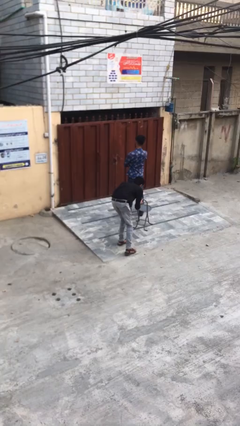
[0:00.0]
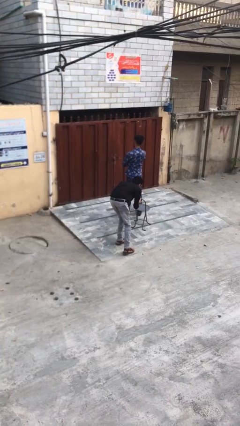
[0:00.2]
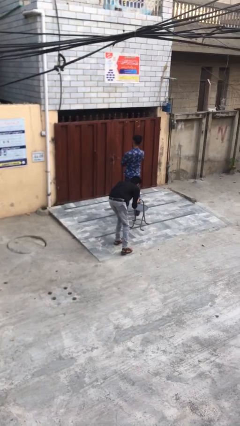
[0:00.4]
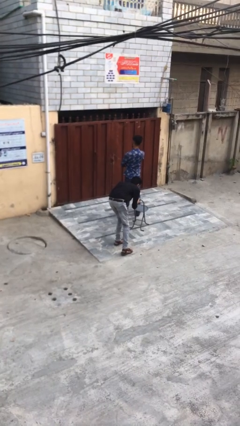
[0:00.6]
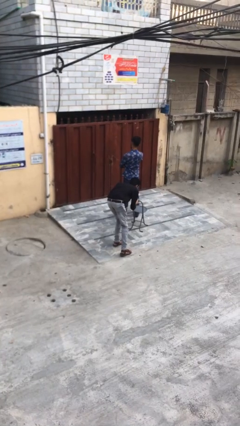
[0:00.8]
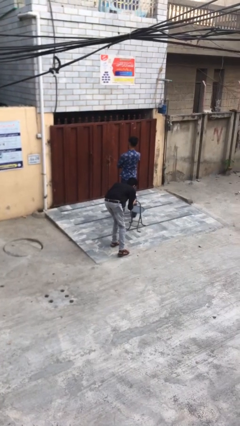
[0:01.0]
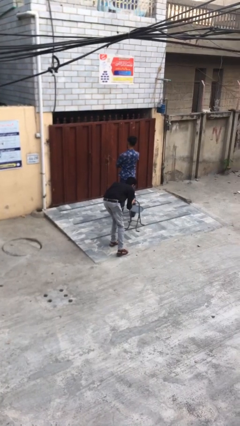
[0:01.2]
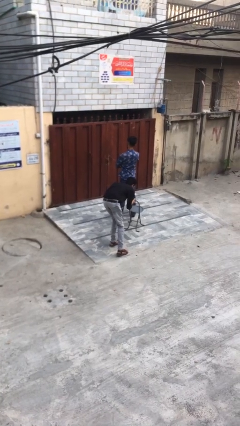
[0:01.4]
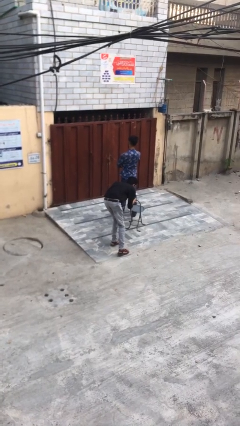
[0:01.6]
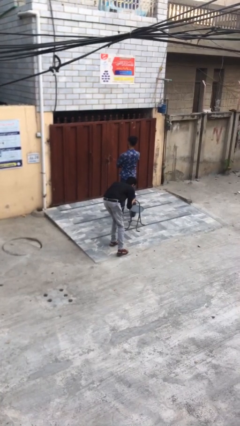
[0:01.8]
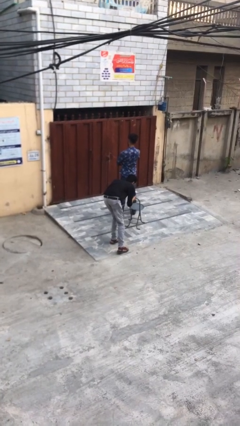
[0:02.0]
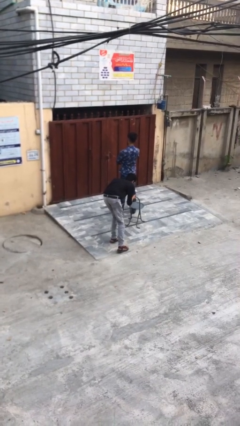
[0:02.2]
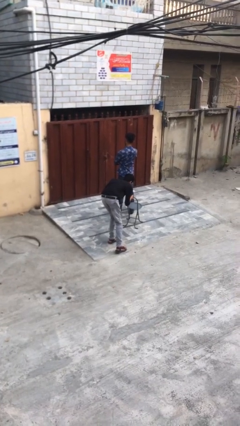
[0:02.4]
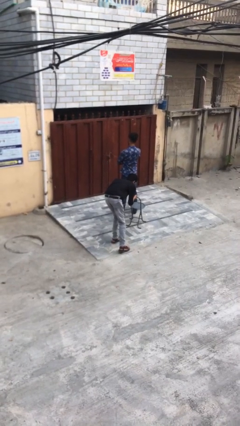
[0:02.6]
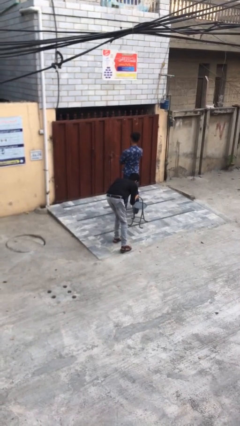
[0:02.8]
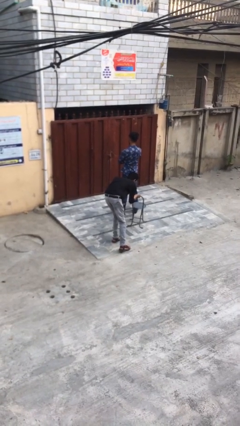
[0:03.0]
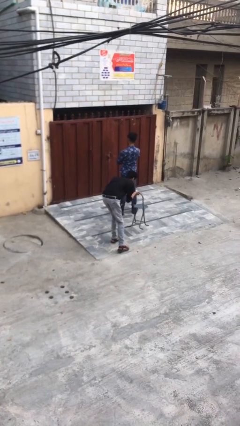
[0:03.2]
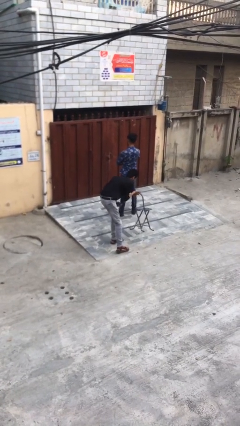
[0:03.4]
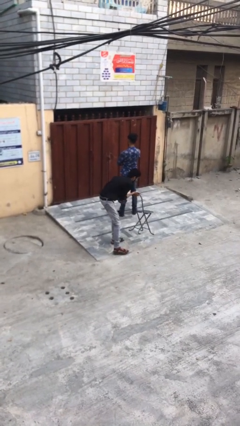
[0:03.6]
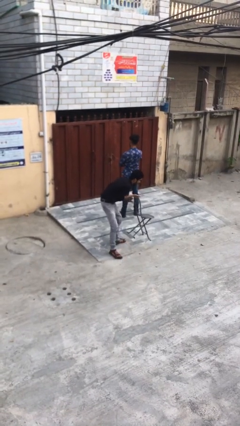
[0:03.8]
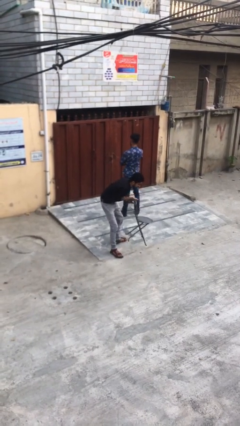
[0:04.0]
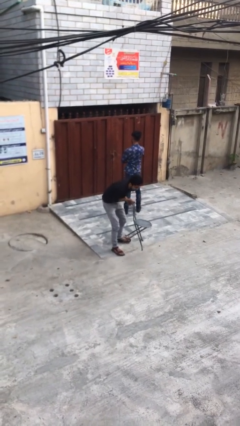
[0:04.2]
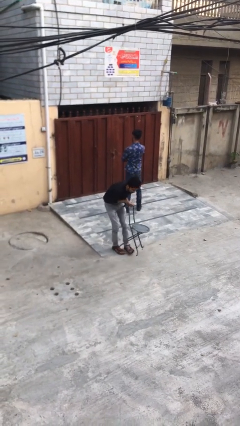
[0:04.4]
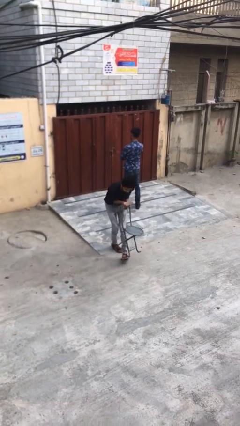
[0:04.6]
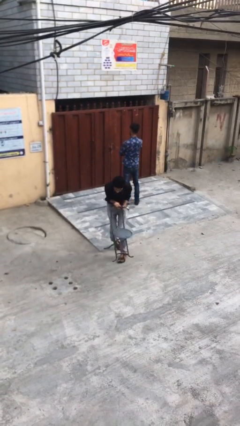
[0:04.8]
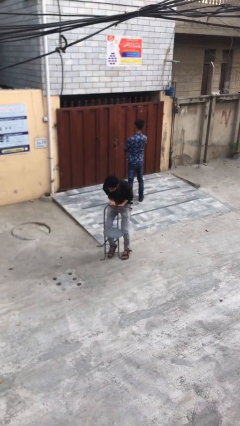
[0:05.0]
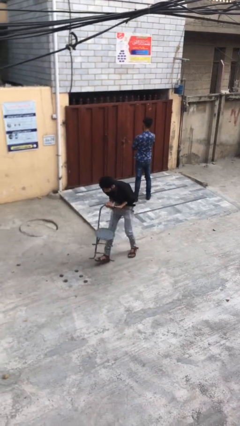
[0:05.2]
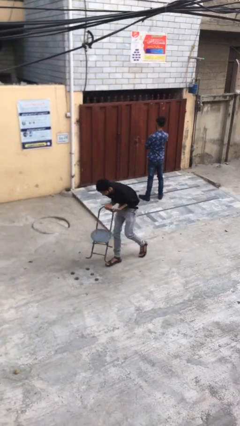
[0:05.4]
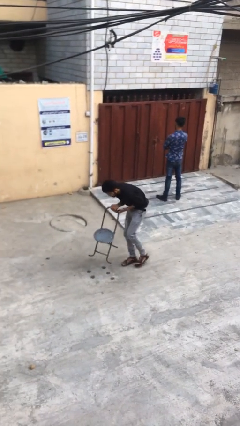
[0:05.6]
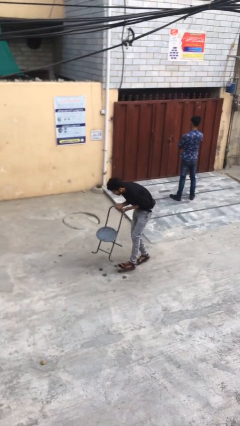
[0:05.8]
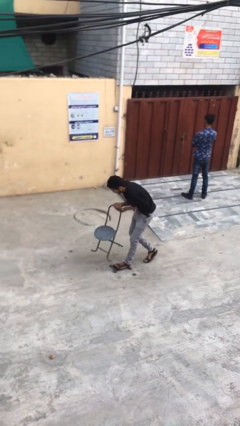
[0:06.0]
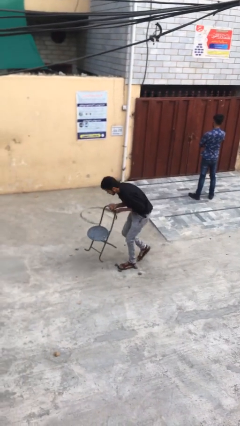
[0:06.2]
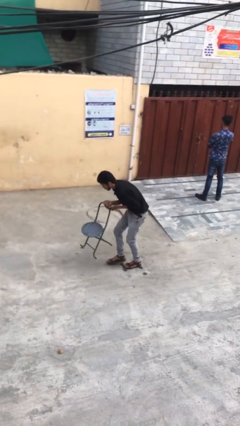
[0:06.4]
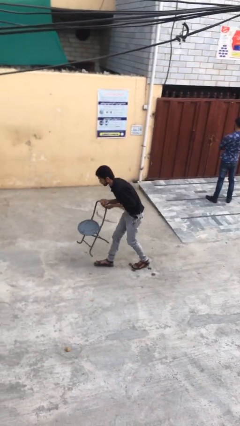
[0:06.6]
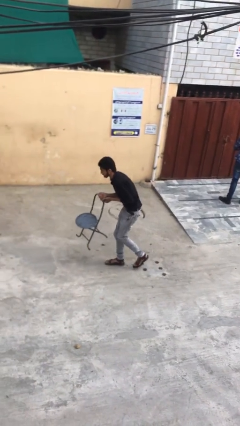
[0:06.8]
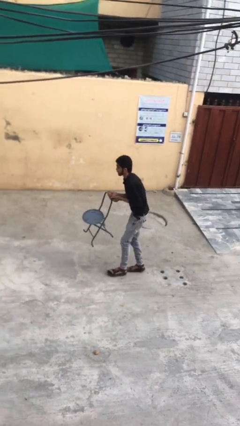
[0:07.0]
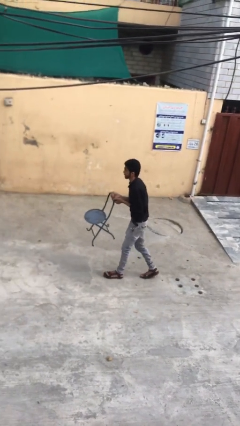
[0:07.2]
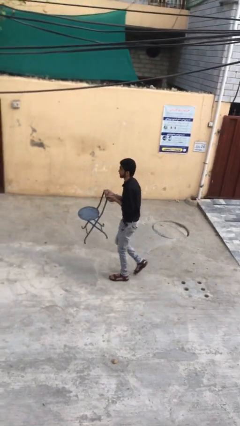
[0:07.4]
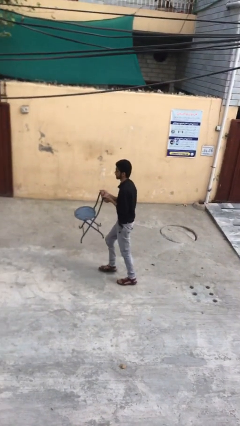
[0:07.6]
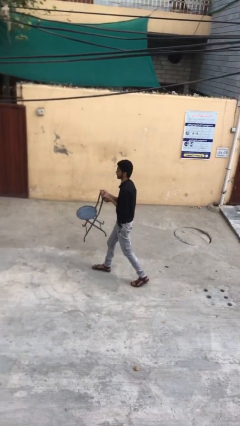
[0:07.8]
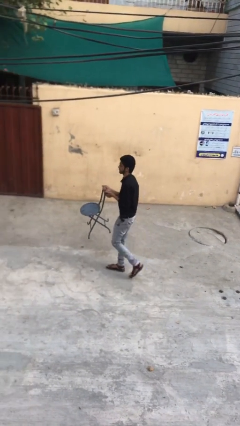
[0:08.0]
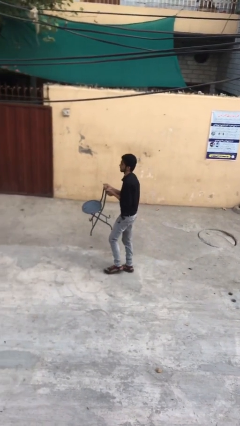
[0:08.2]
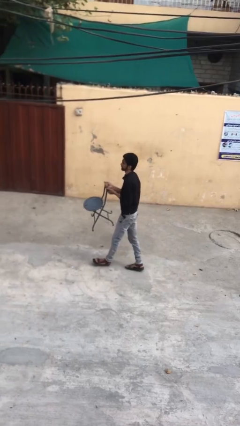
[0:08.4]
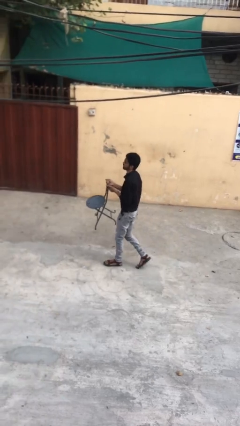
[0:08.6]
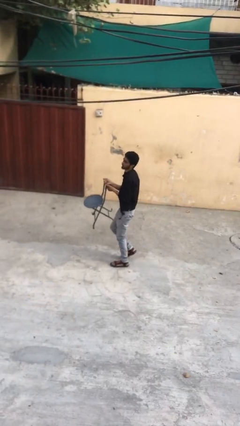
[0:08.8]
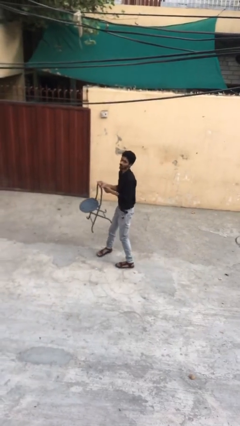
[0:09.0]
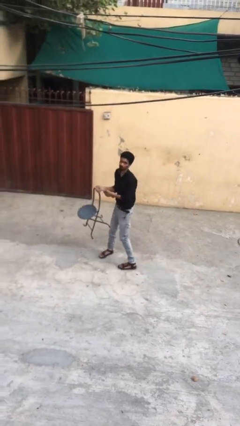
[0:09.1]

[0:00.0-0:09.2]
person steals object from person

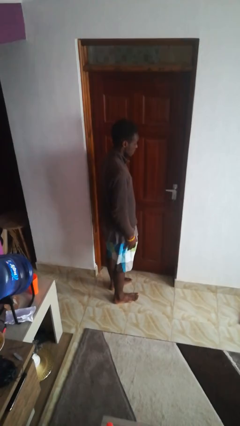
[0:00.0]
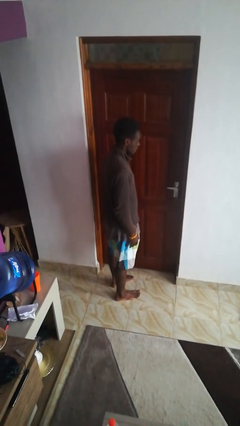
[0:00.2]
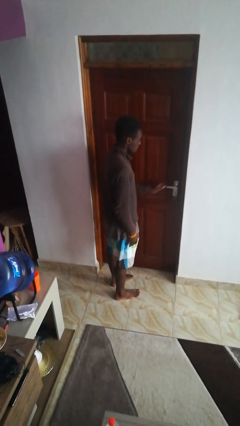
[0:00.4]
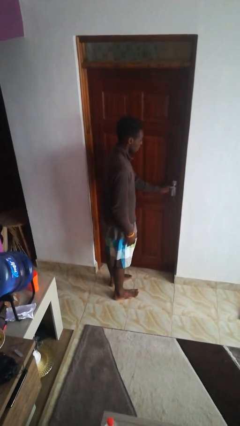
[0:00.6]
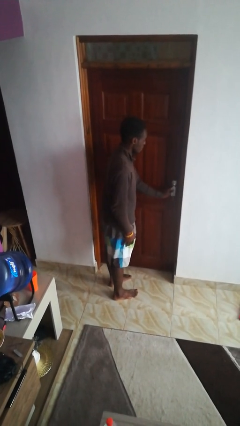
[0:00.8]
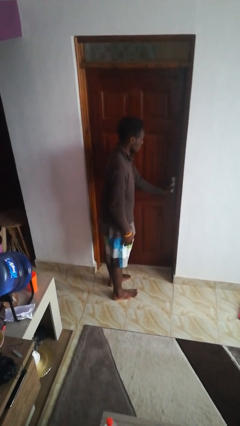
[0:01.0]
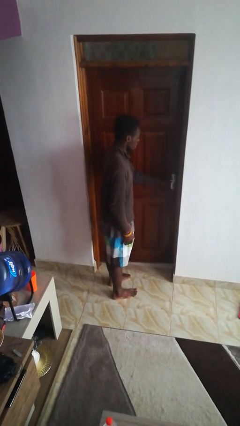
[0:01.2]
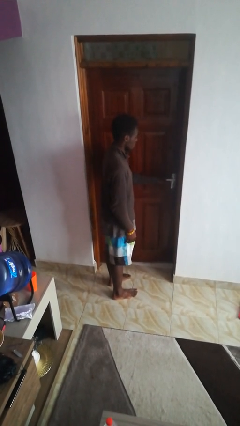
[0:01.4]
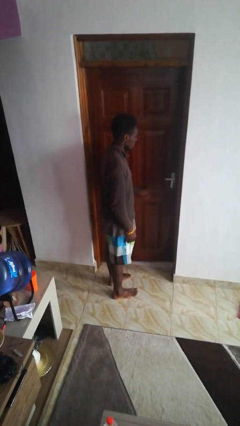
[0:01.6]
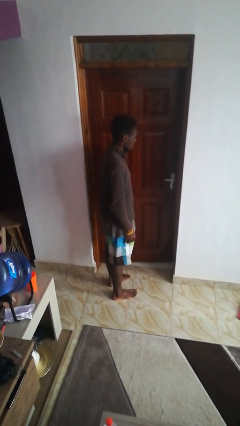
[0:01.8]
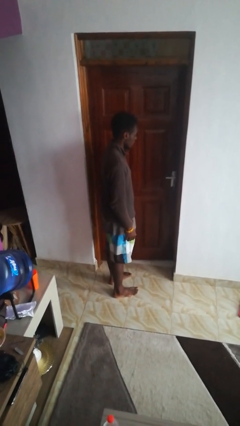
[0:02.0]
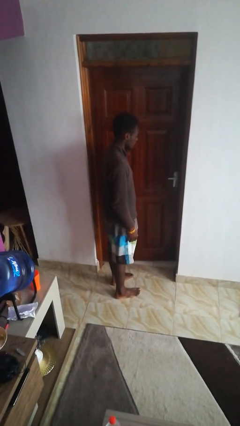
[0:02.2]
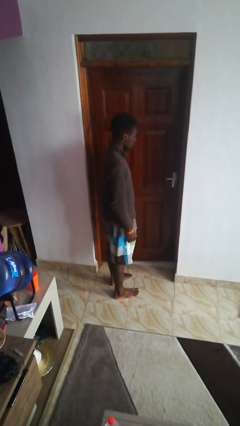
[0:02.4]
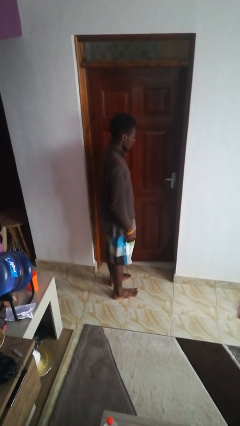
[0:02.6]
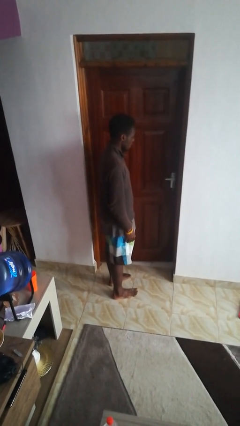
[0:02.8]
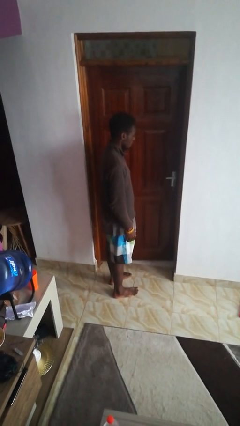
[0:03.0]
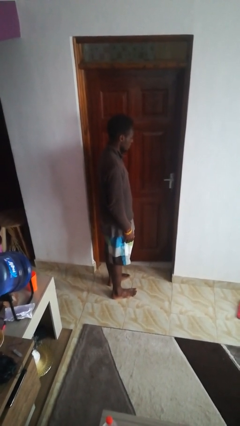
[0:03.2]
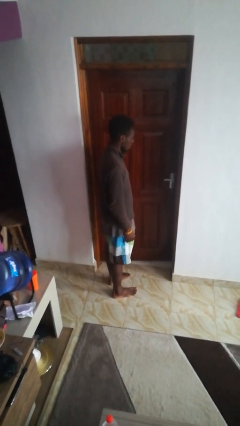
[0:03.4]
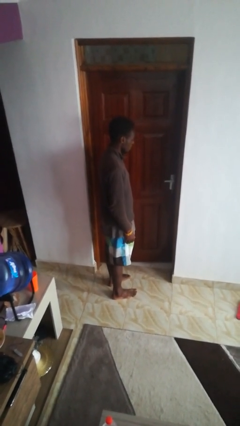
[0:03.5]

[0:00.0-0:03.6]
person opens facility door

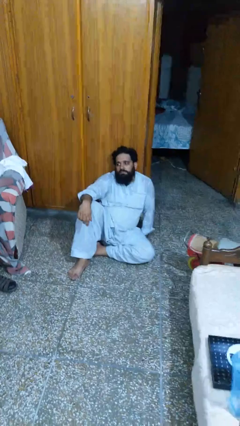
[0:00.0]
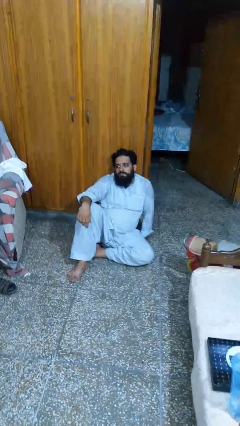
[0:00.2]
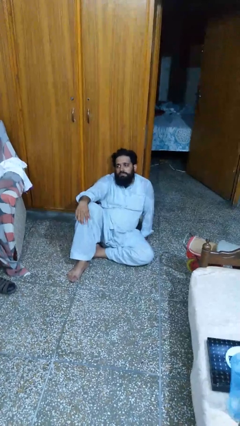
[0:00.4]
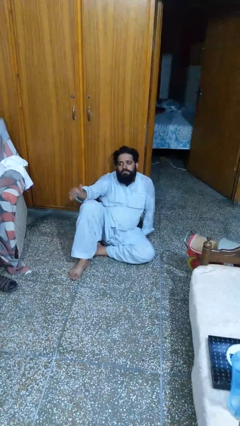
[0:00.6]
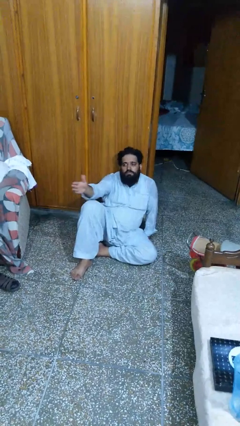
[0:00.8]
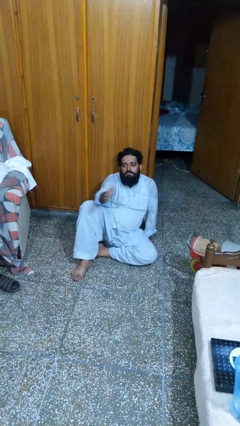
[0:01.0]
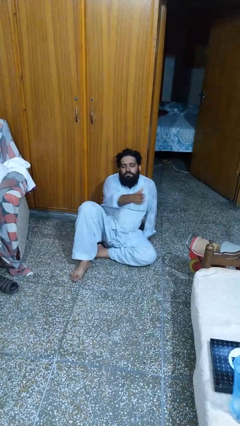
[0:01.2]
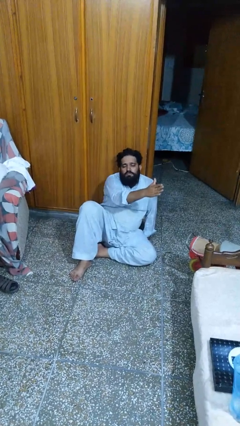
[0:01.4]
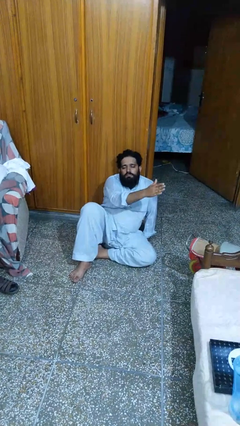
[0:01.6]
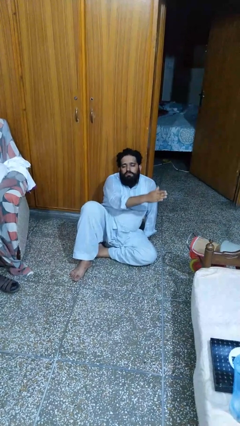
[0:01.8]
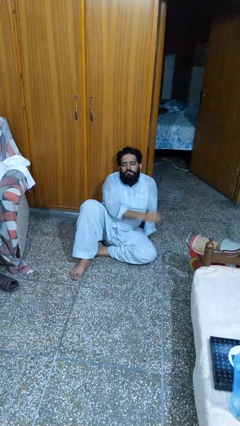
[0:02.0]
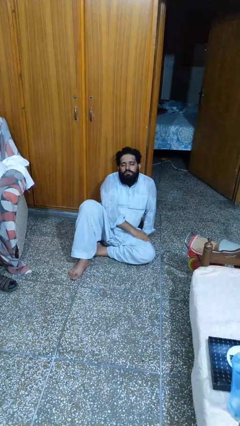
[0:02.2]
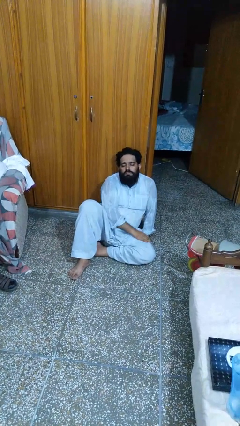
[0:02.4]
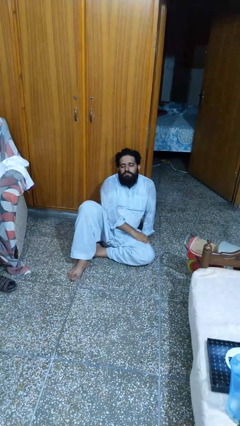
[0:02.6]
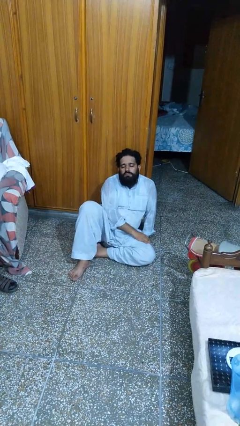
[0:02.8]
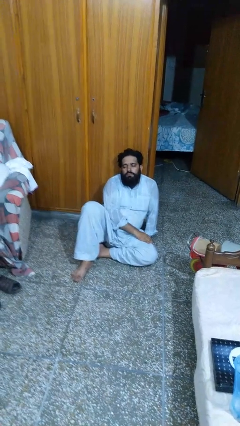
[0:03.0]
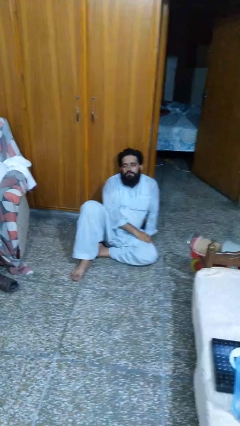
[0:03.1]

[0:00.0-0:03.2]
person gestures swipe left

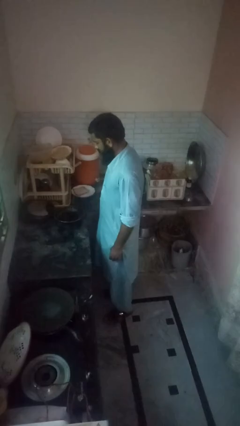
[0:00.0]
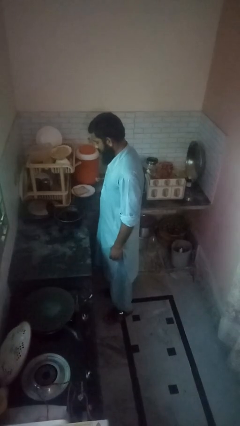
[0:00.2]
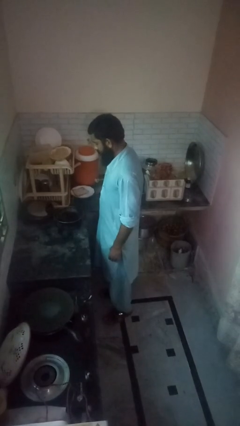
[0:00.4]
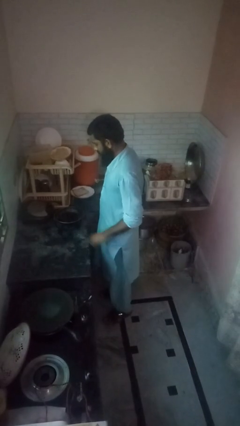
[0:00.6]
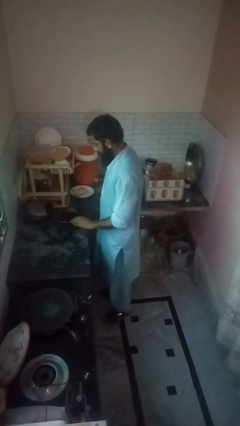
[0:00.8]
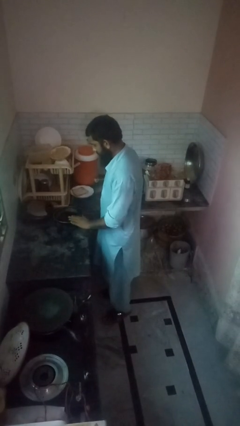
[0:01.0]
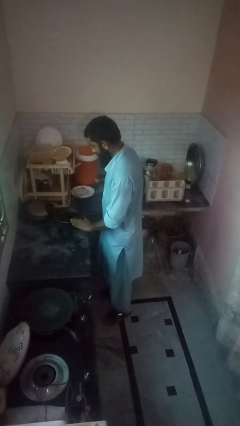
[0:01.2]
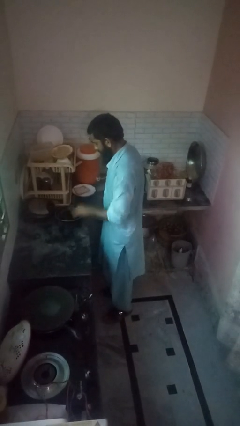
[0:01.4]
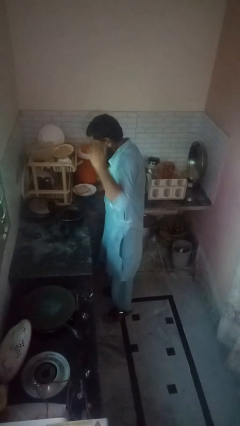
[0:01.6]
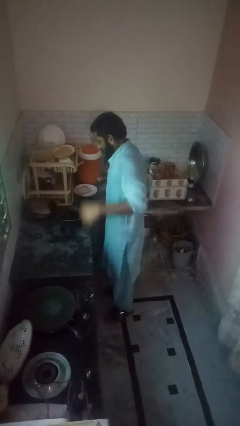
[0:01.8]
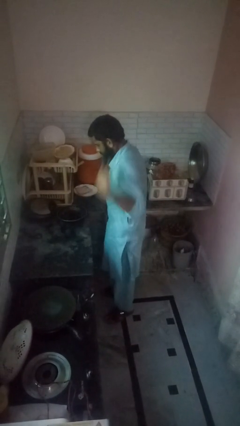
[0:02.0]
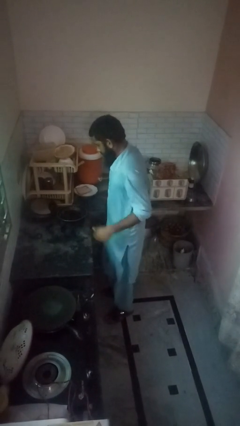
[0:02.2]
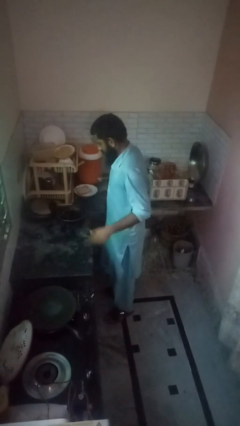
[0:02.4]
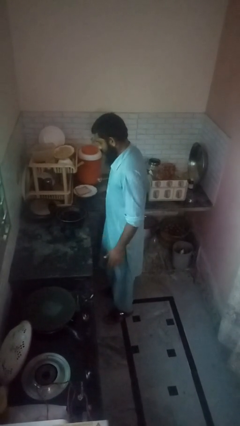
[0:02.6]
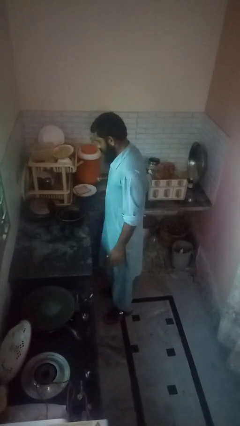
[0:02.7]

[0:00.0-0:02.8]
person burns hand
